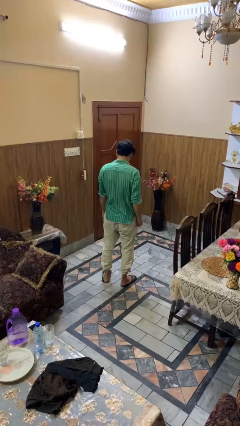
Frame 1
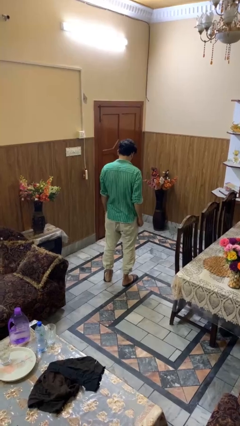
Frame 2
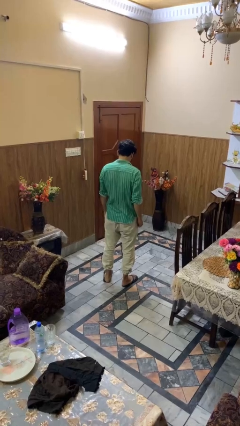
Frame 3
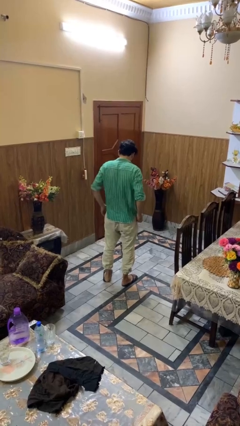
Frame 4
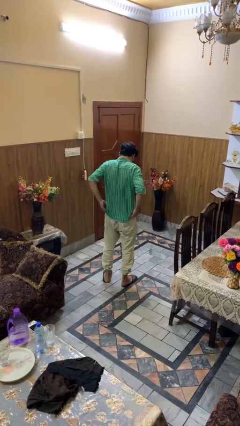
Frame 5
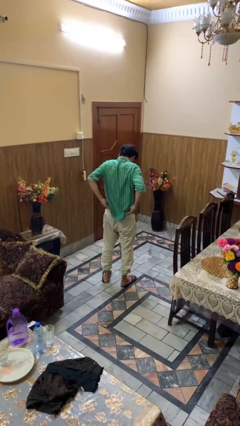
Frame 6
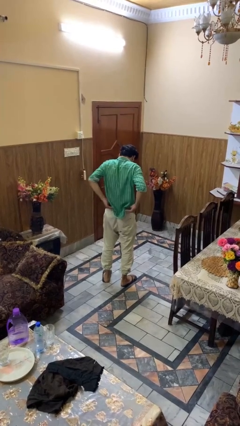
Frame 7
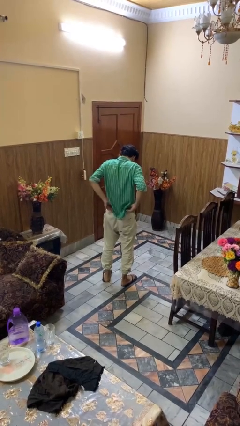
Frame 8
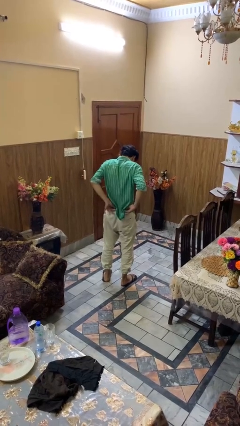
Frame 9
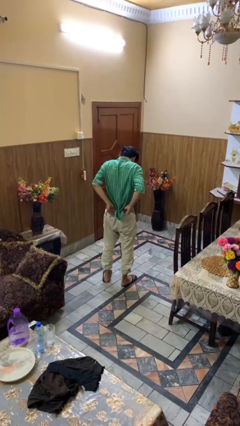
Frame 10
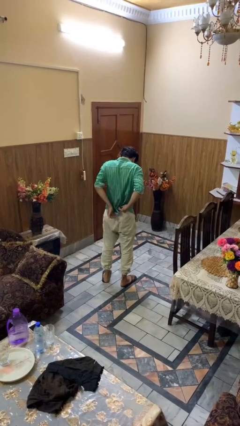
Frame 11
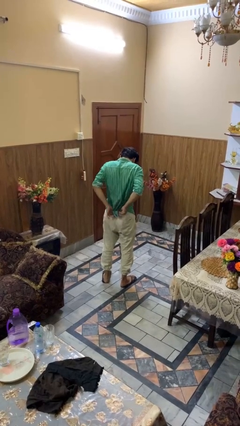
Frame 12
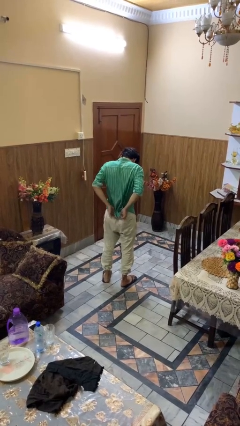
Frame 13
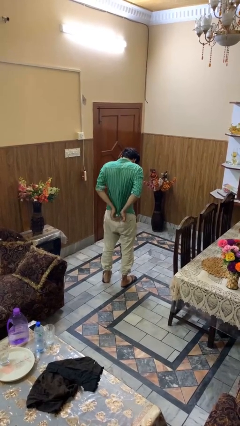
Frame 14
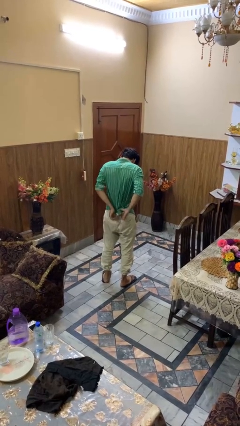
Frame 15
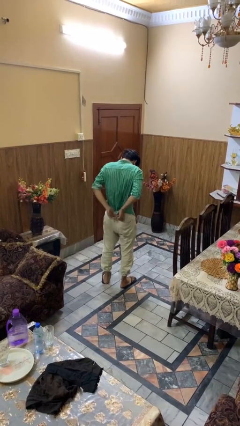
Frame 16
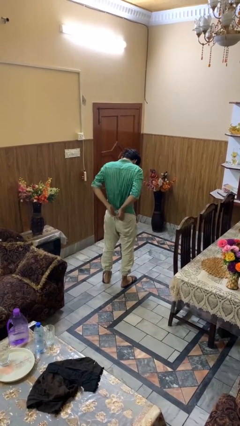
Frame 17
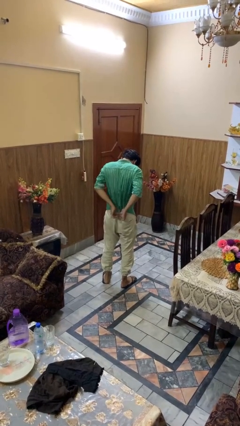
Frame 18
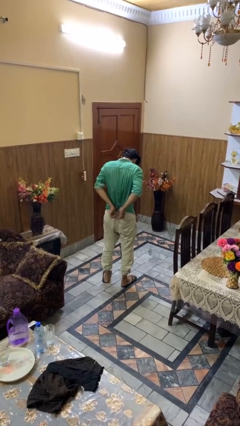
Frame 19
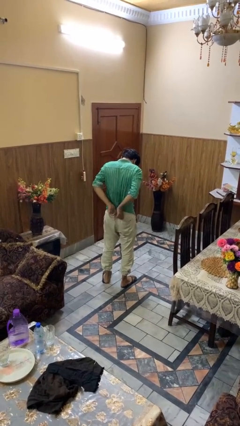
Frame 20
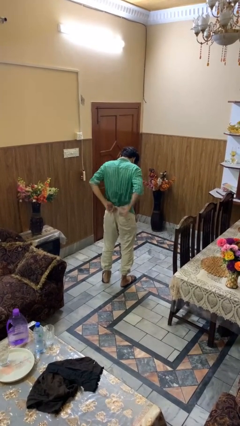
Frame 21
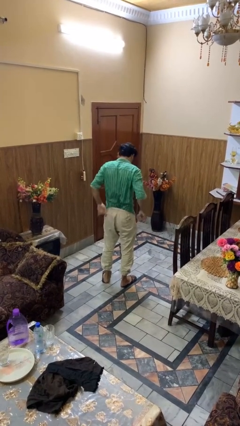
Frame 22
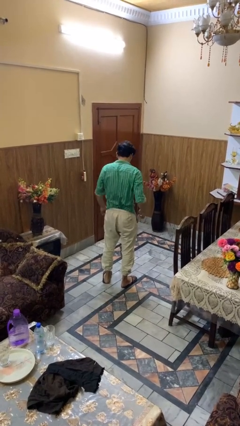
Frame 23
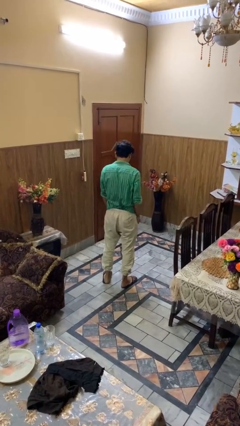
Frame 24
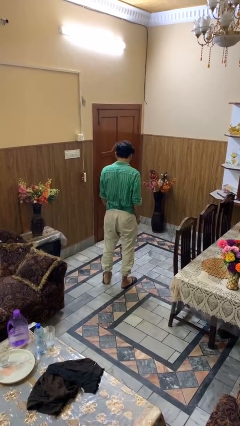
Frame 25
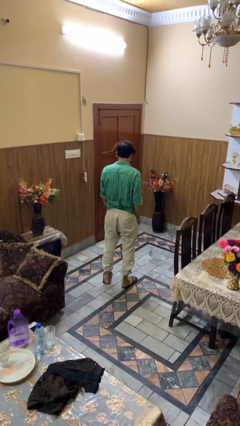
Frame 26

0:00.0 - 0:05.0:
person tucks in shirt

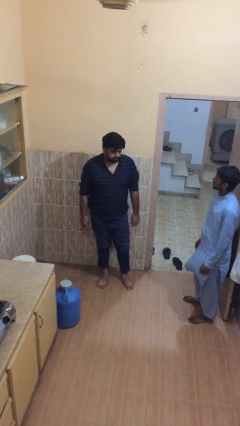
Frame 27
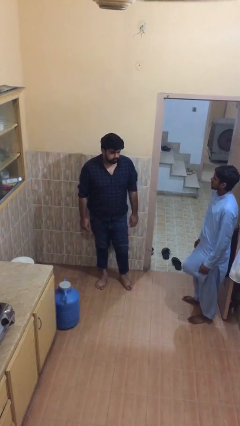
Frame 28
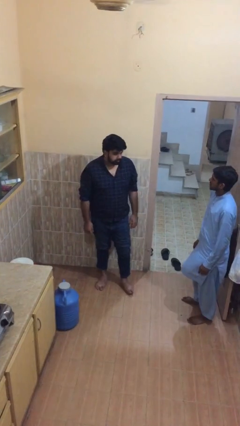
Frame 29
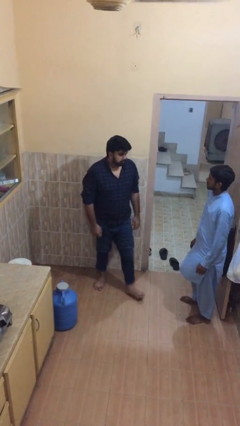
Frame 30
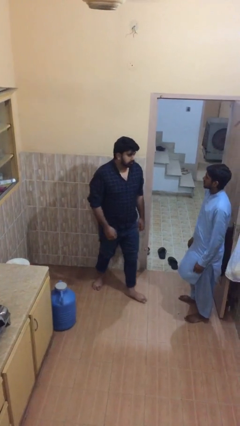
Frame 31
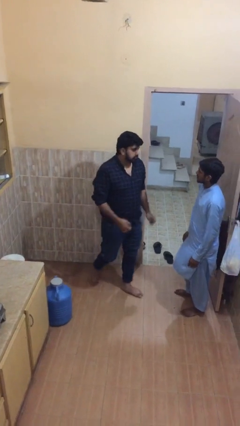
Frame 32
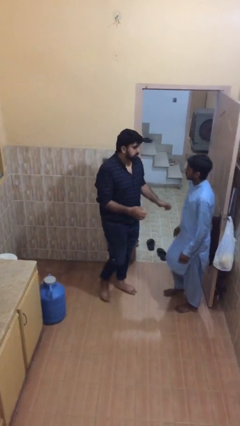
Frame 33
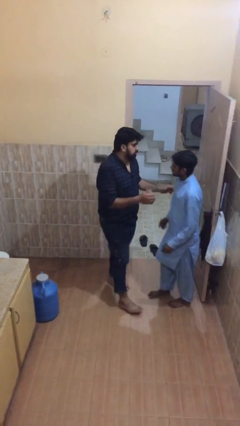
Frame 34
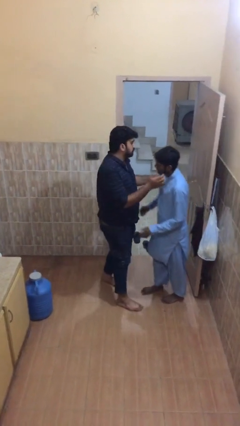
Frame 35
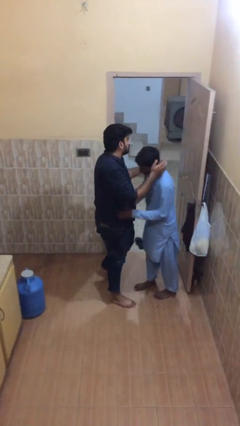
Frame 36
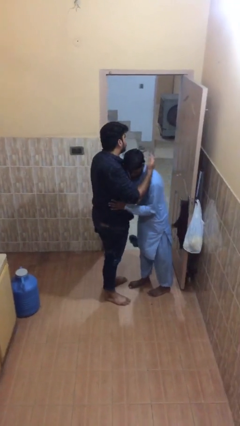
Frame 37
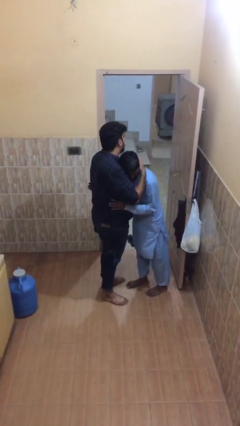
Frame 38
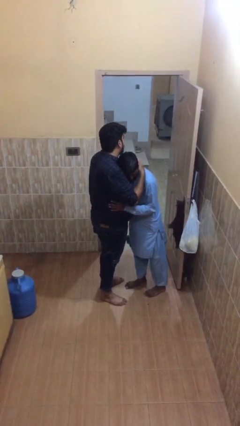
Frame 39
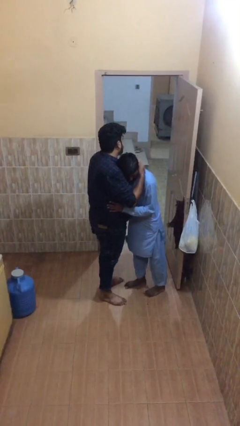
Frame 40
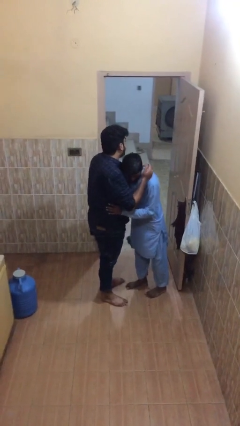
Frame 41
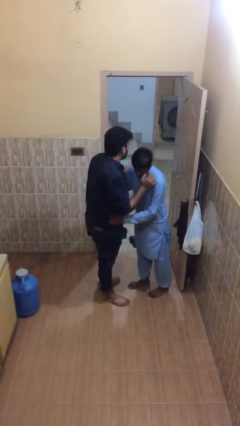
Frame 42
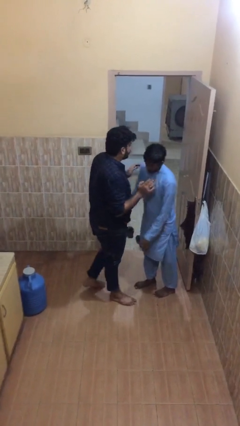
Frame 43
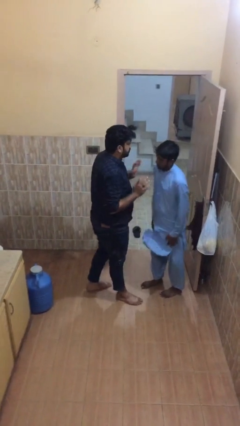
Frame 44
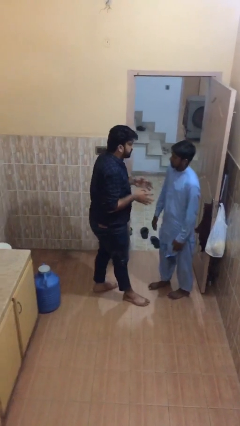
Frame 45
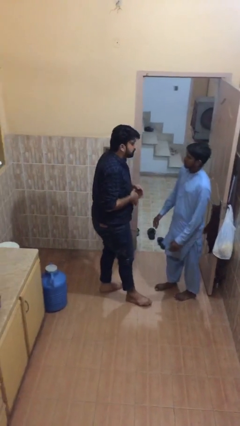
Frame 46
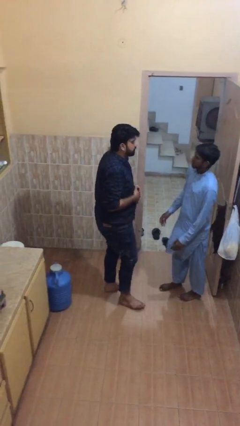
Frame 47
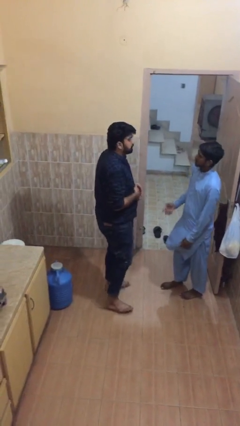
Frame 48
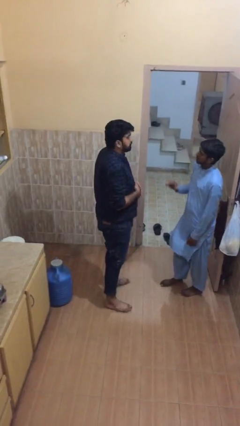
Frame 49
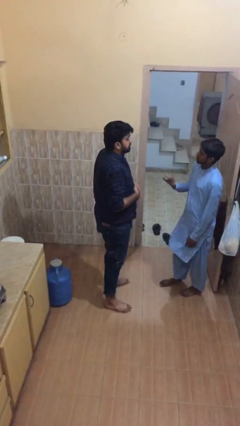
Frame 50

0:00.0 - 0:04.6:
person embraces person

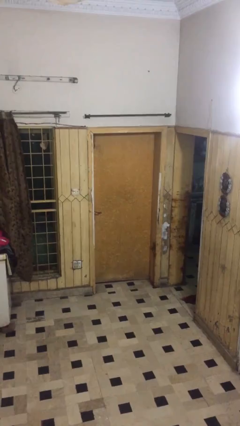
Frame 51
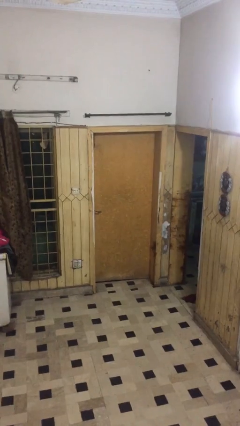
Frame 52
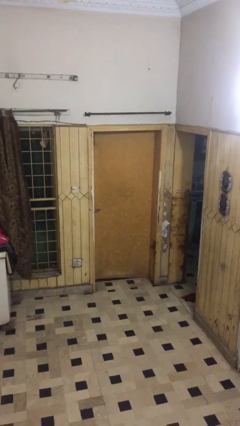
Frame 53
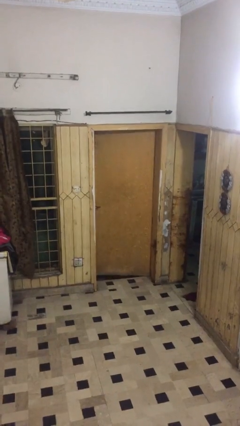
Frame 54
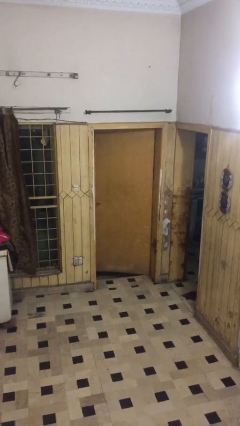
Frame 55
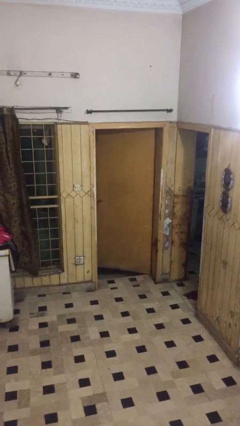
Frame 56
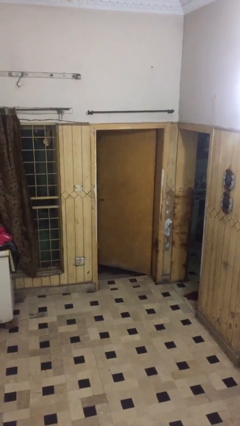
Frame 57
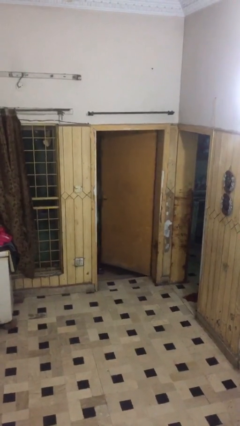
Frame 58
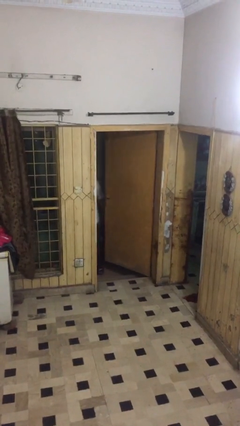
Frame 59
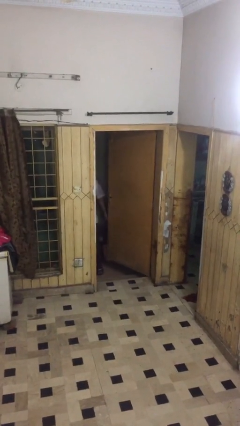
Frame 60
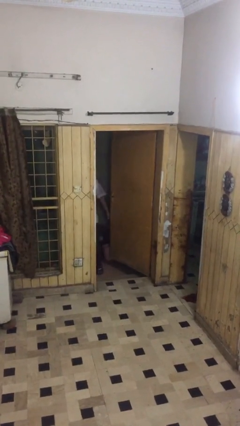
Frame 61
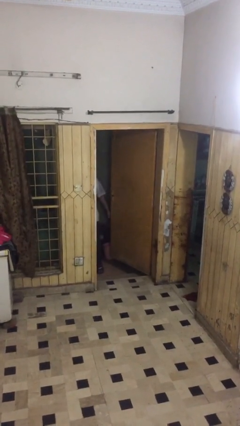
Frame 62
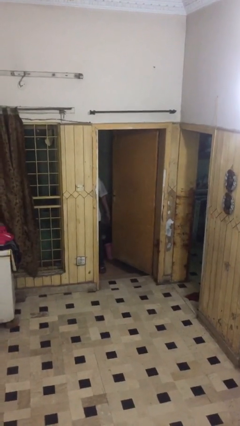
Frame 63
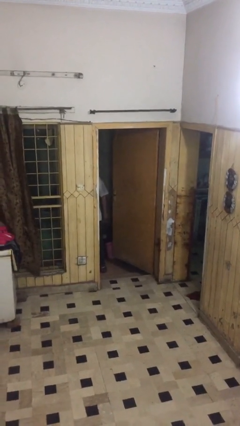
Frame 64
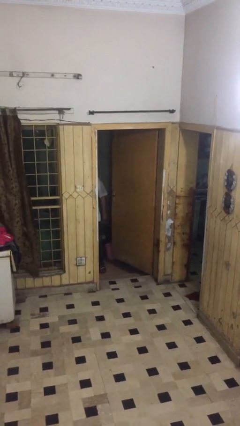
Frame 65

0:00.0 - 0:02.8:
person opens facility door

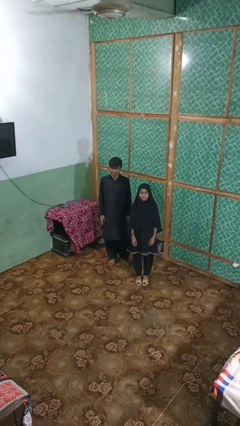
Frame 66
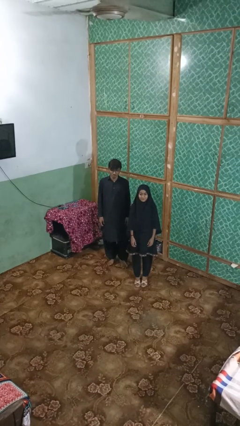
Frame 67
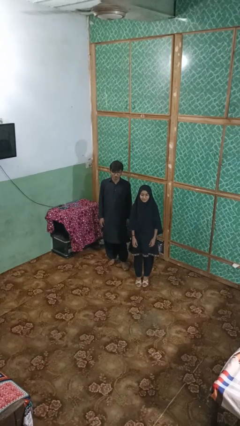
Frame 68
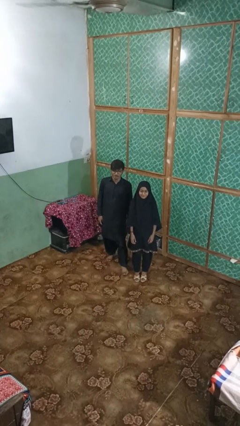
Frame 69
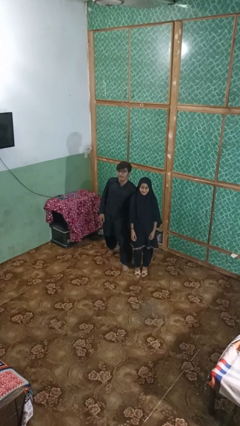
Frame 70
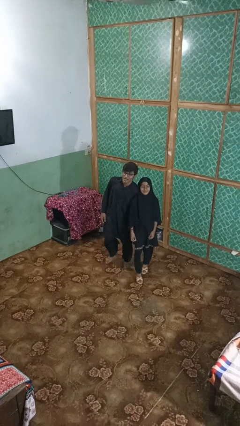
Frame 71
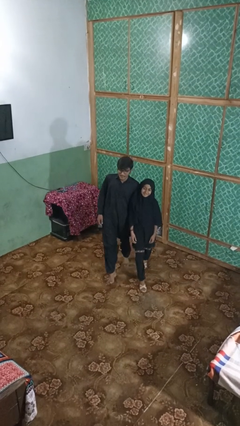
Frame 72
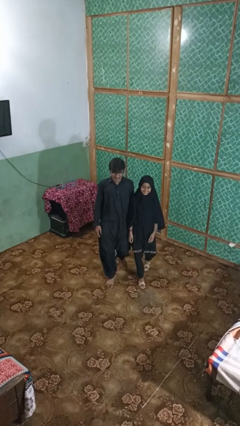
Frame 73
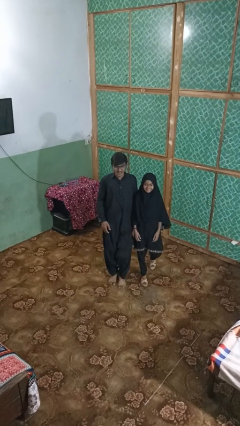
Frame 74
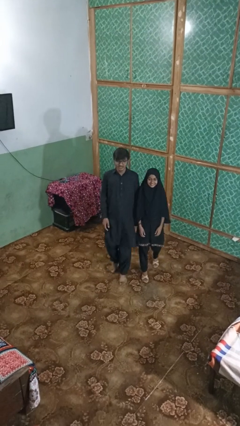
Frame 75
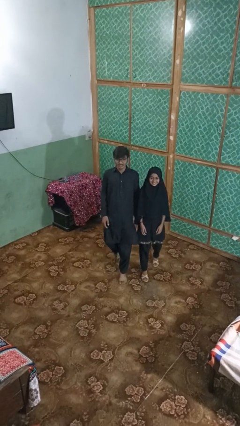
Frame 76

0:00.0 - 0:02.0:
person shoves person

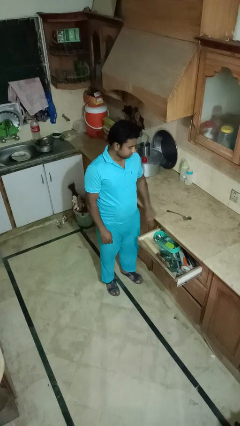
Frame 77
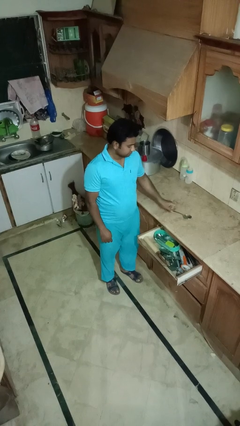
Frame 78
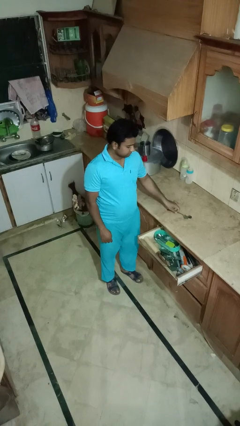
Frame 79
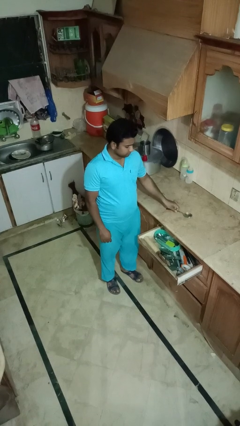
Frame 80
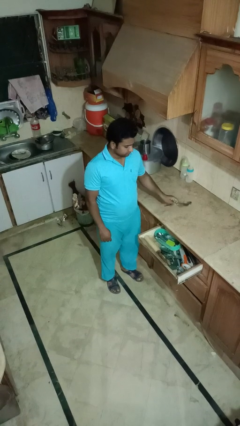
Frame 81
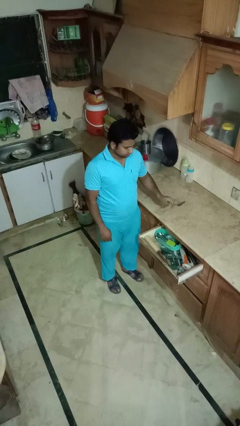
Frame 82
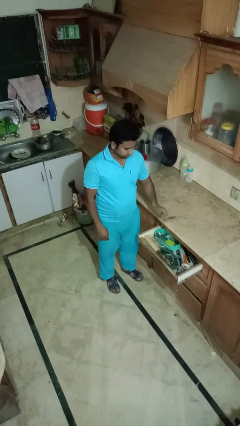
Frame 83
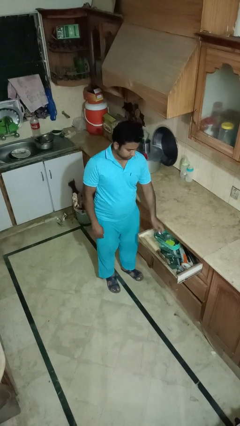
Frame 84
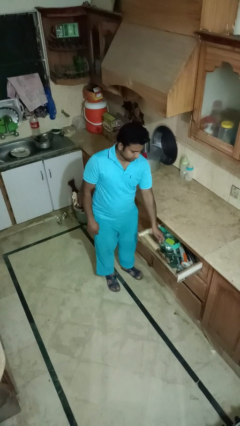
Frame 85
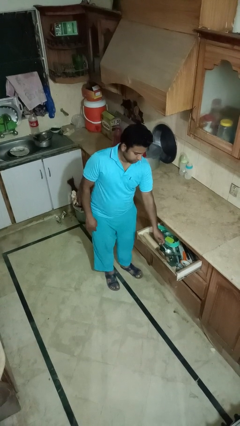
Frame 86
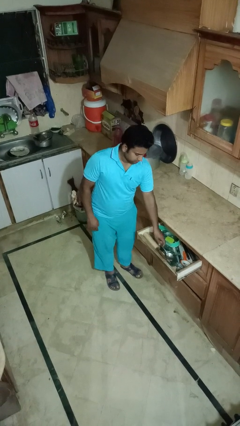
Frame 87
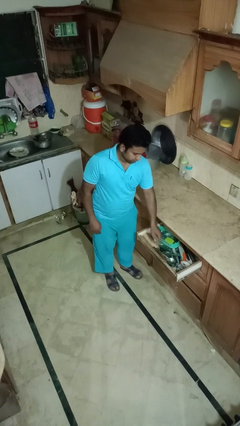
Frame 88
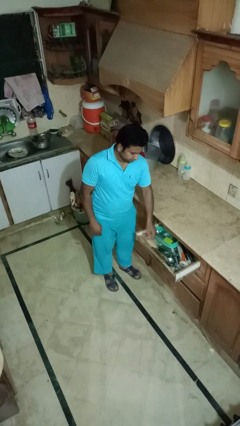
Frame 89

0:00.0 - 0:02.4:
person puts object into kitchen drawer

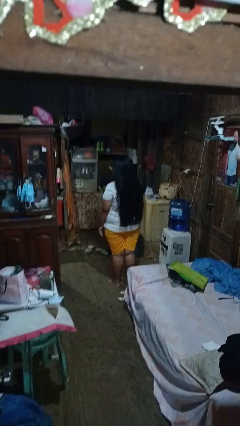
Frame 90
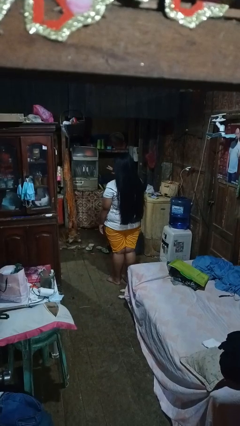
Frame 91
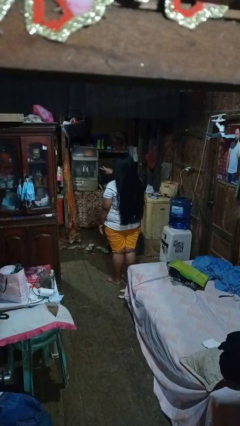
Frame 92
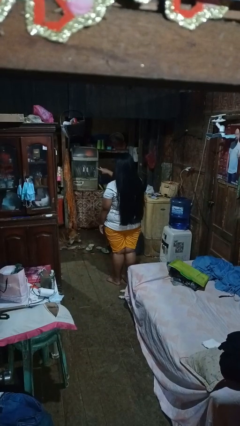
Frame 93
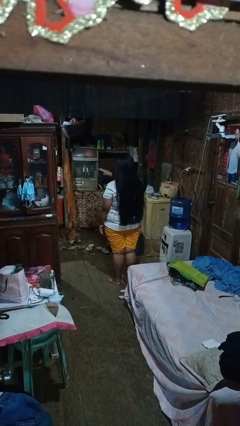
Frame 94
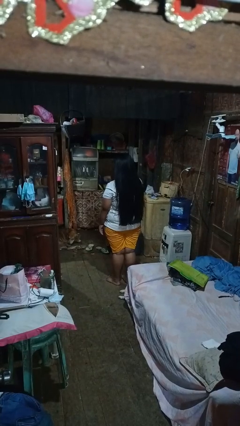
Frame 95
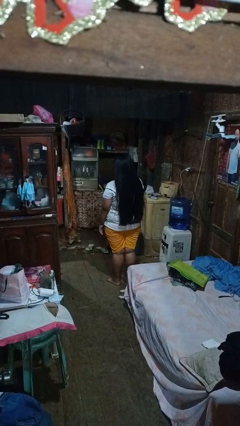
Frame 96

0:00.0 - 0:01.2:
person gestures watch closely
